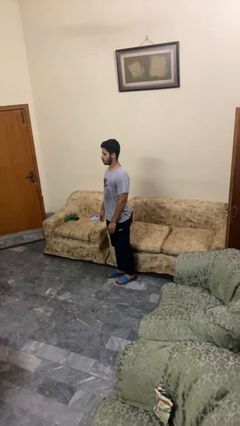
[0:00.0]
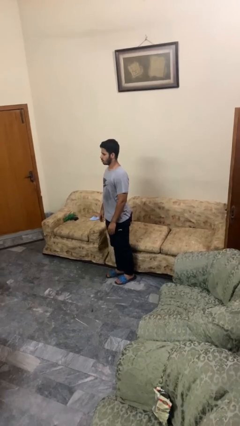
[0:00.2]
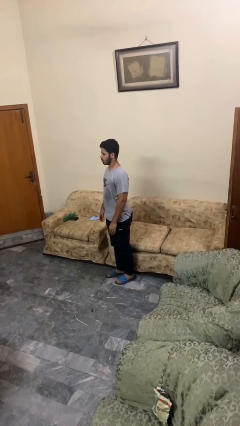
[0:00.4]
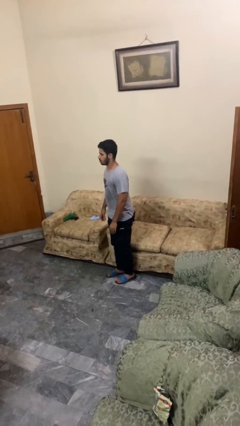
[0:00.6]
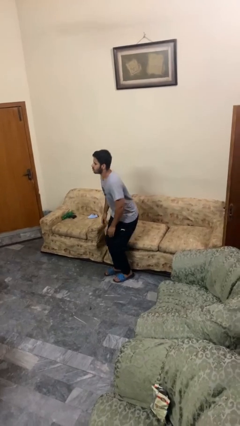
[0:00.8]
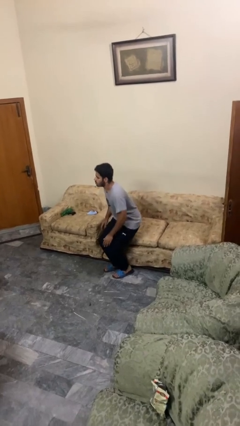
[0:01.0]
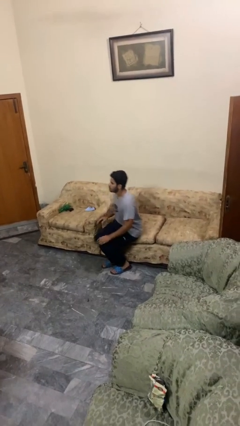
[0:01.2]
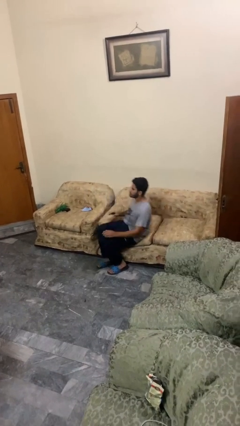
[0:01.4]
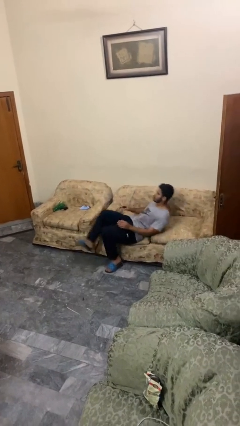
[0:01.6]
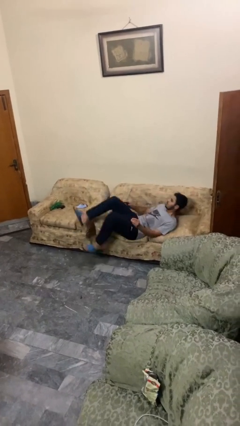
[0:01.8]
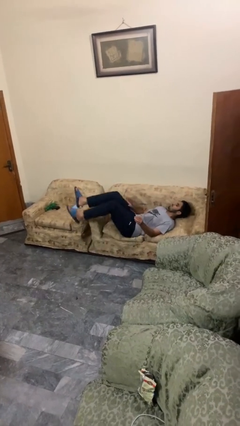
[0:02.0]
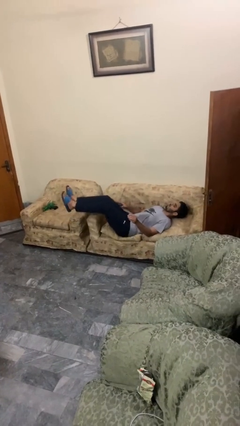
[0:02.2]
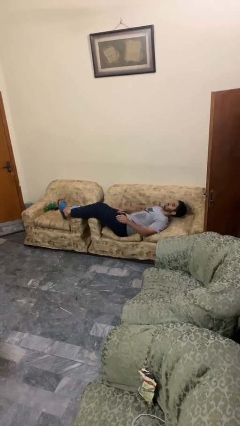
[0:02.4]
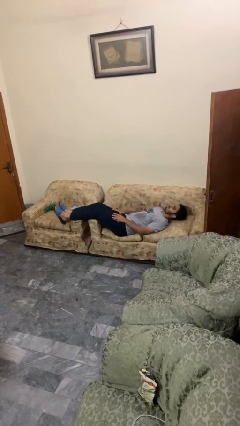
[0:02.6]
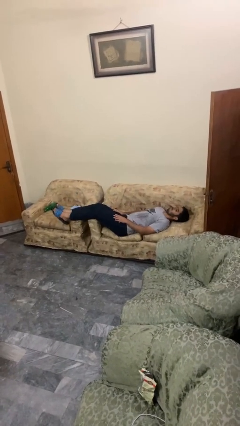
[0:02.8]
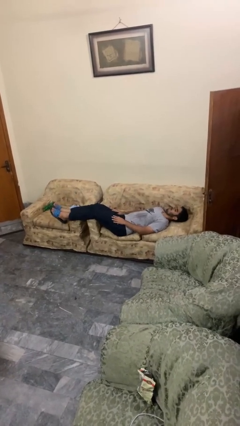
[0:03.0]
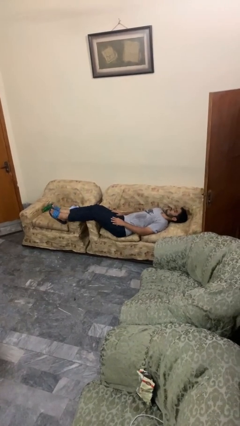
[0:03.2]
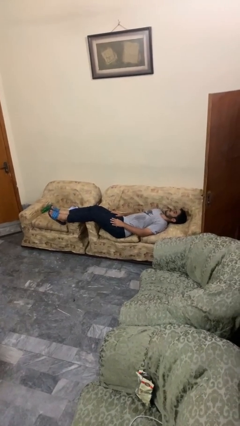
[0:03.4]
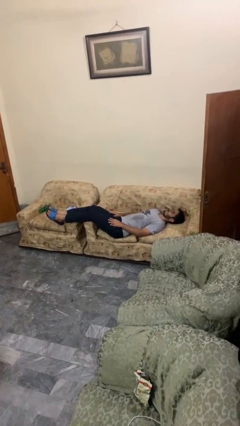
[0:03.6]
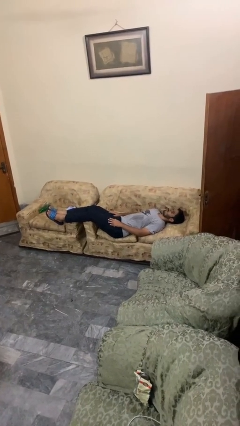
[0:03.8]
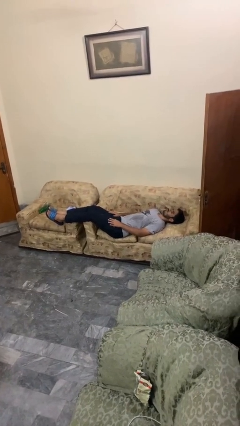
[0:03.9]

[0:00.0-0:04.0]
person lies down on couch

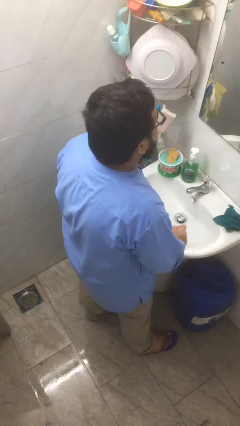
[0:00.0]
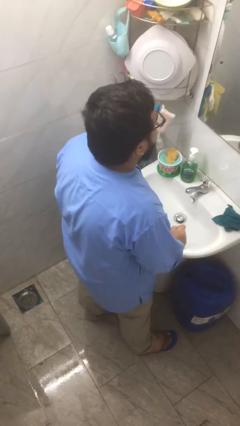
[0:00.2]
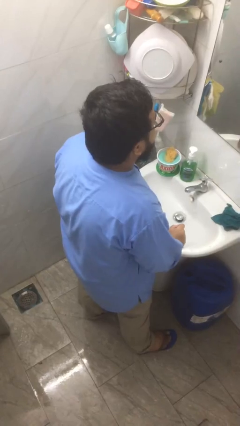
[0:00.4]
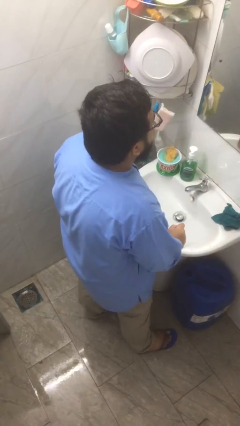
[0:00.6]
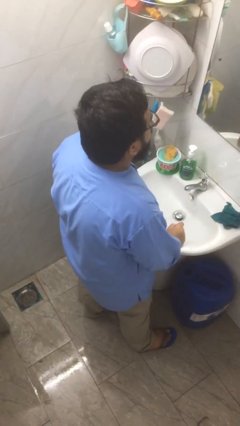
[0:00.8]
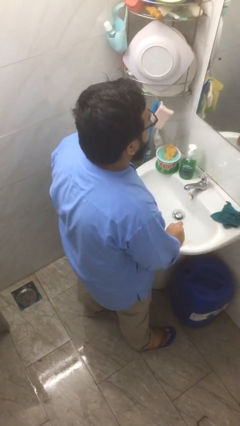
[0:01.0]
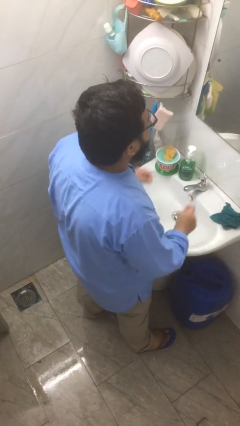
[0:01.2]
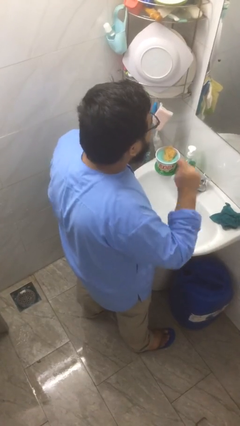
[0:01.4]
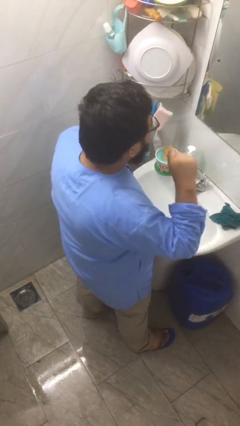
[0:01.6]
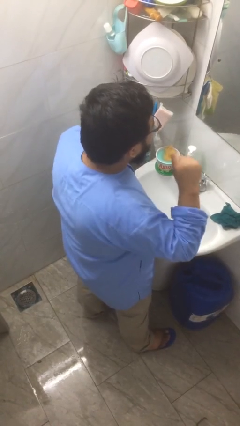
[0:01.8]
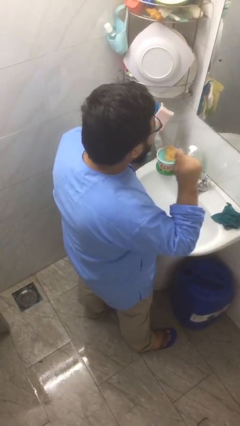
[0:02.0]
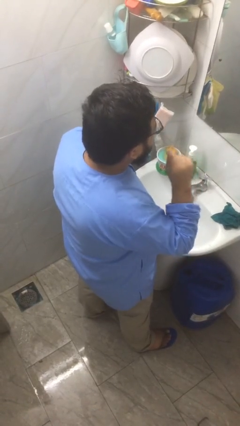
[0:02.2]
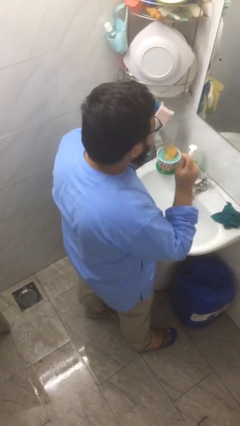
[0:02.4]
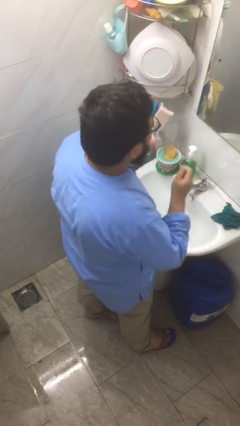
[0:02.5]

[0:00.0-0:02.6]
person flosses

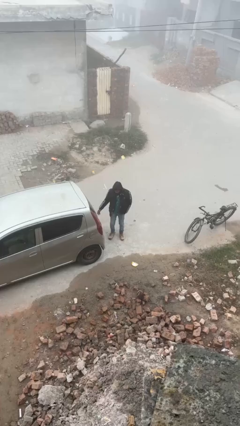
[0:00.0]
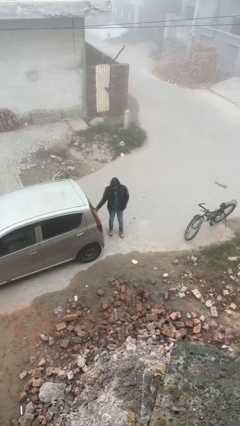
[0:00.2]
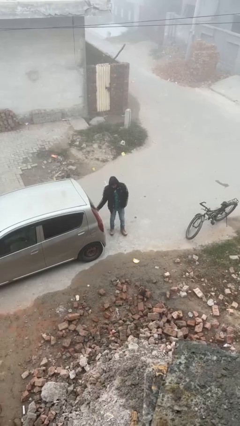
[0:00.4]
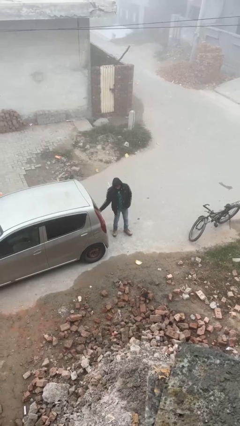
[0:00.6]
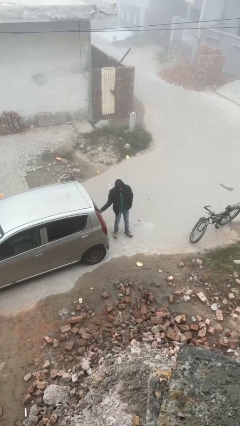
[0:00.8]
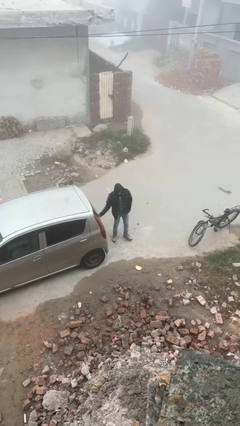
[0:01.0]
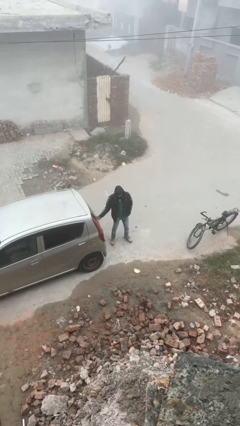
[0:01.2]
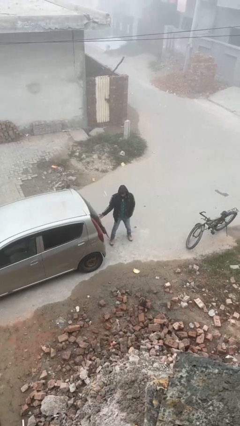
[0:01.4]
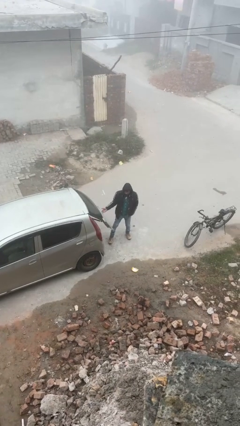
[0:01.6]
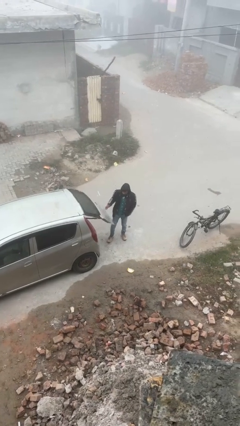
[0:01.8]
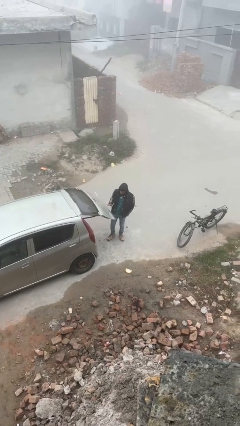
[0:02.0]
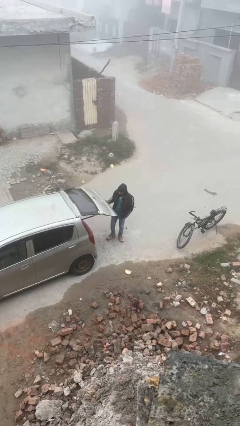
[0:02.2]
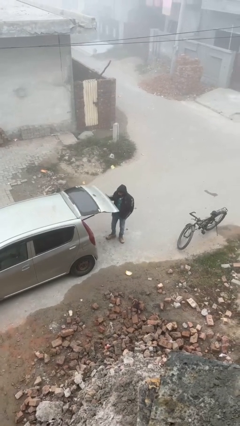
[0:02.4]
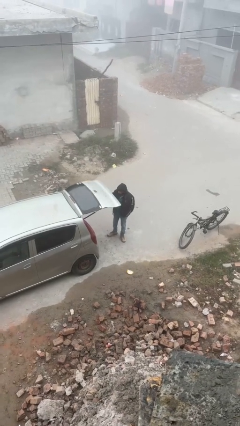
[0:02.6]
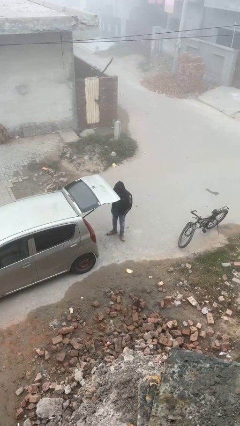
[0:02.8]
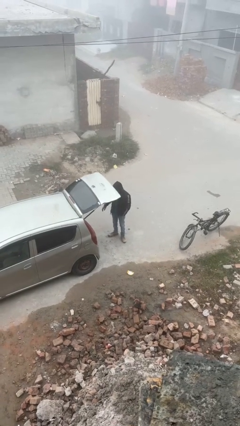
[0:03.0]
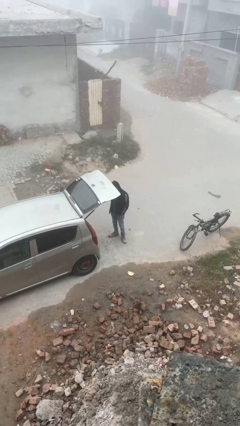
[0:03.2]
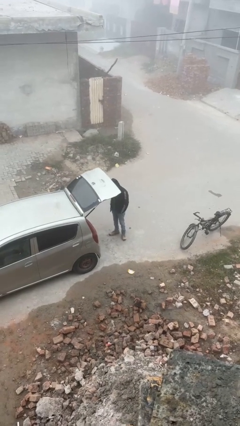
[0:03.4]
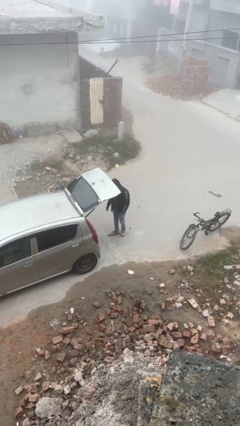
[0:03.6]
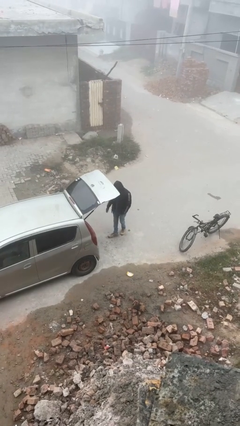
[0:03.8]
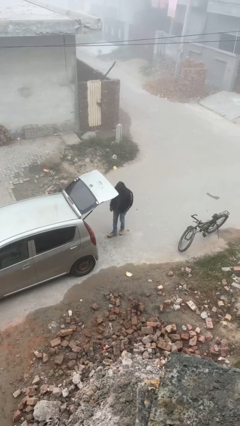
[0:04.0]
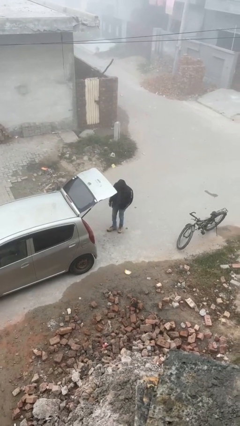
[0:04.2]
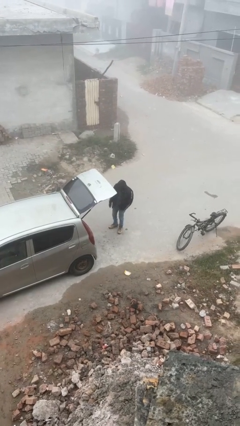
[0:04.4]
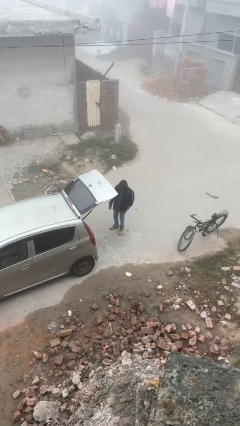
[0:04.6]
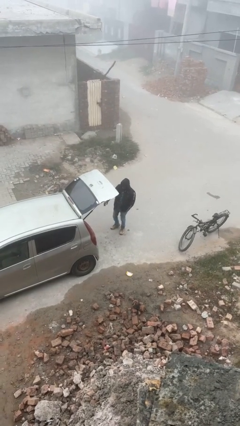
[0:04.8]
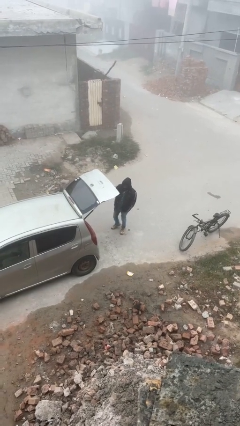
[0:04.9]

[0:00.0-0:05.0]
person opens car trunk

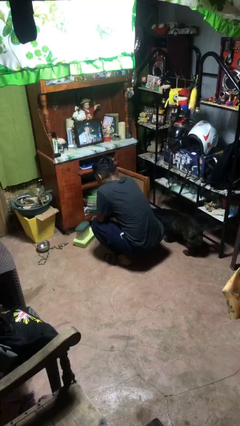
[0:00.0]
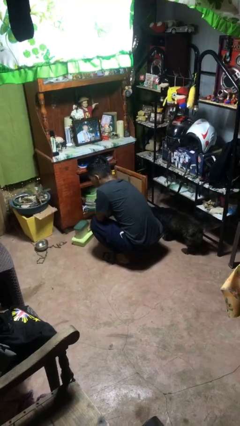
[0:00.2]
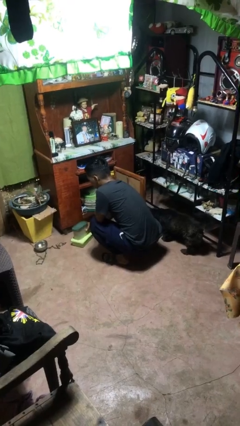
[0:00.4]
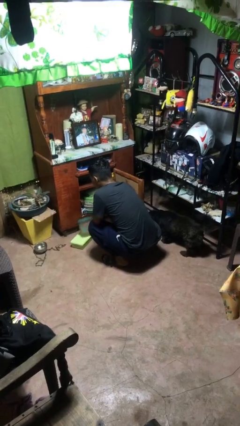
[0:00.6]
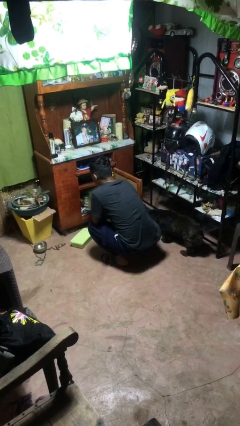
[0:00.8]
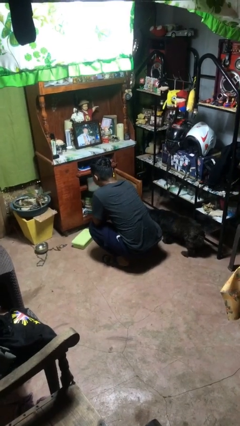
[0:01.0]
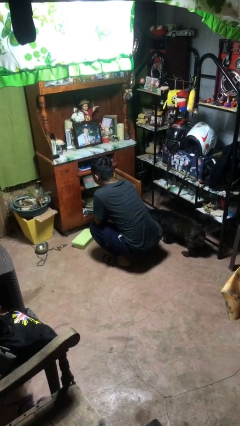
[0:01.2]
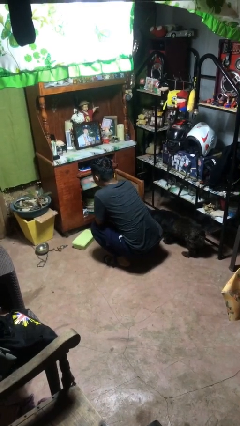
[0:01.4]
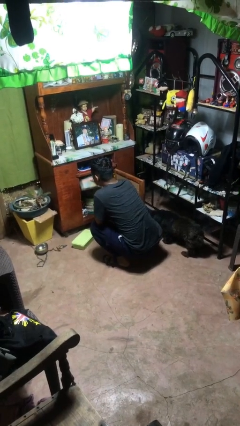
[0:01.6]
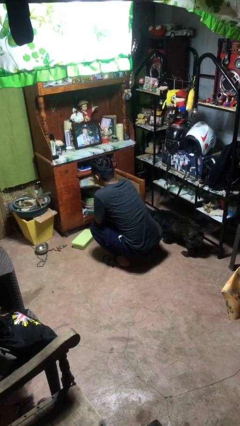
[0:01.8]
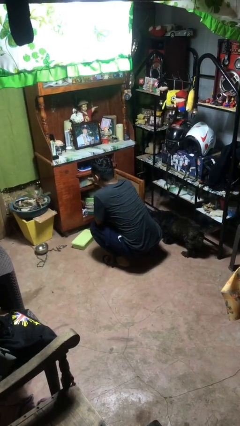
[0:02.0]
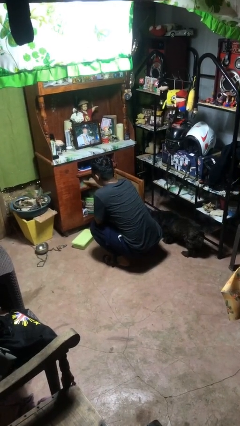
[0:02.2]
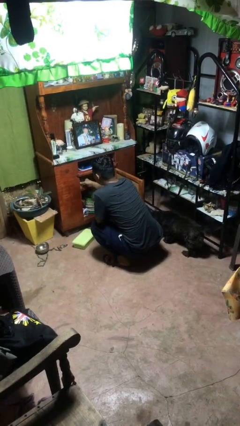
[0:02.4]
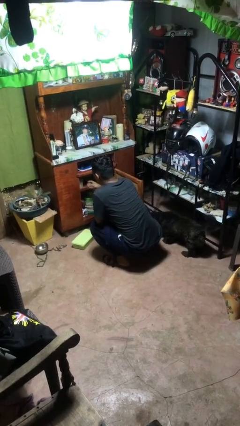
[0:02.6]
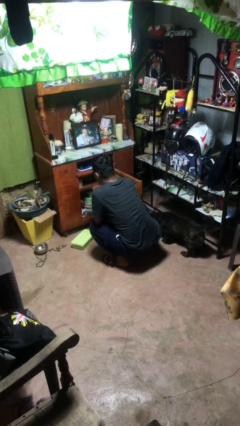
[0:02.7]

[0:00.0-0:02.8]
person puts object in cabinet

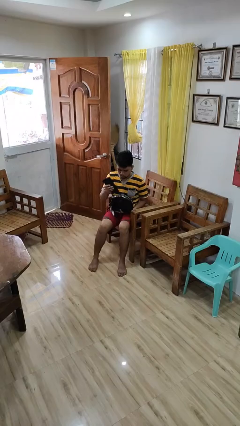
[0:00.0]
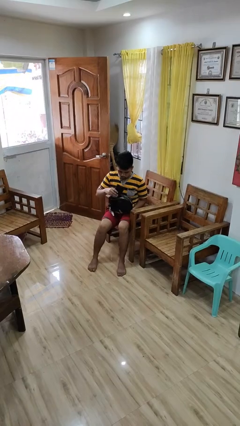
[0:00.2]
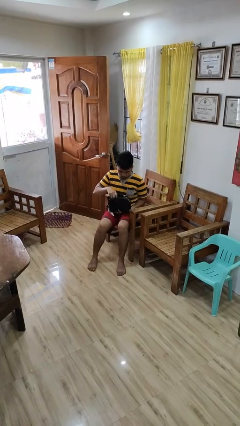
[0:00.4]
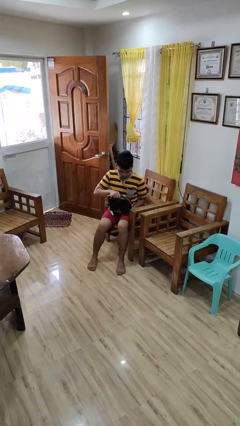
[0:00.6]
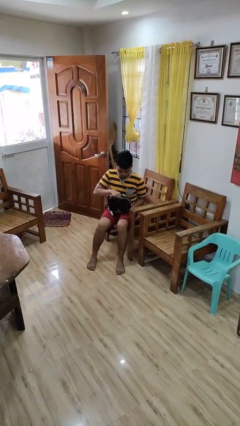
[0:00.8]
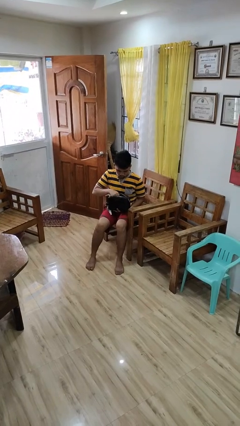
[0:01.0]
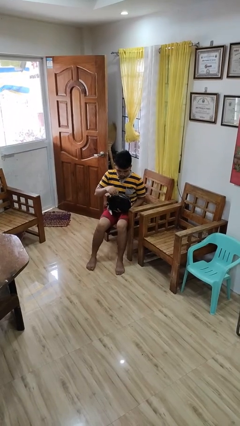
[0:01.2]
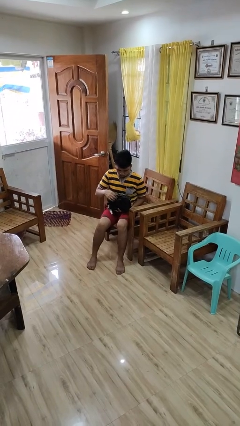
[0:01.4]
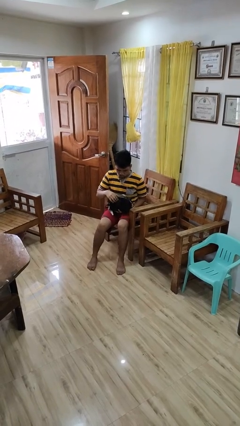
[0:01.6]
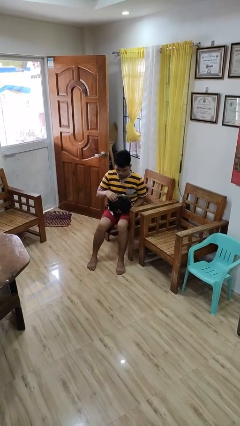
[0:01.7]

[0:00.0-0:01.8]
person puts object into purse

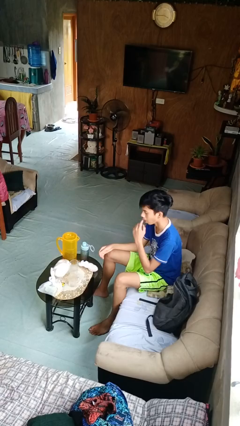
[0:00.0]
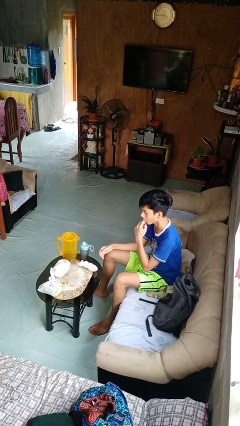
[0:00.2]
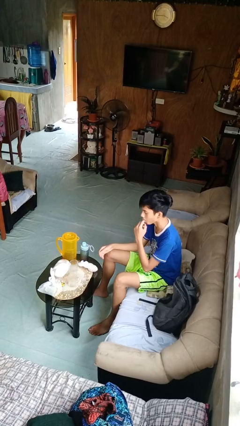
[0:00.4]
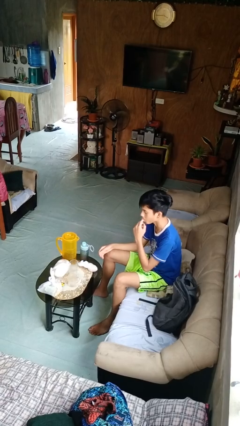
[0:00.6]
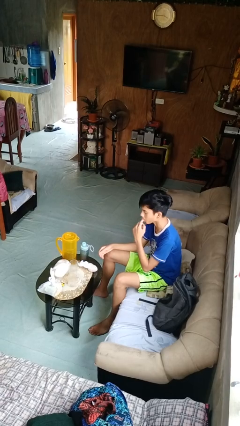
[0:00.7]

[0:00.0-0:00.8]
person licks fingers

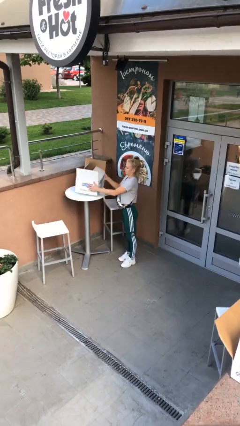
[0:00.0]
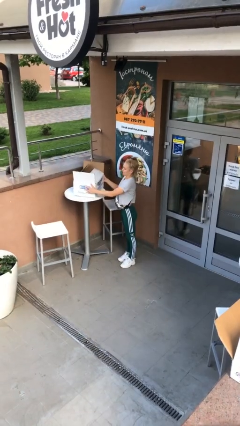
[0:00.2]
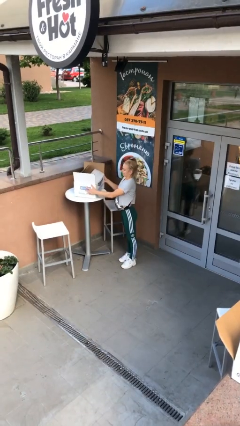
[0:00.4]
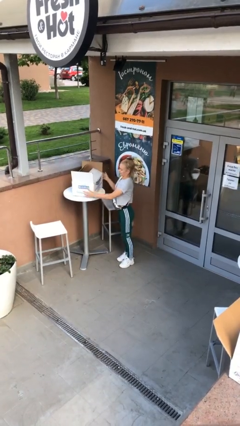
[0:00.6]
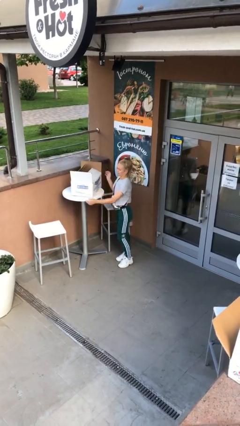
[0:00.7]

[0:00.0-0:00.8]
person puts down object on table
